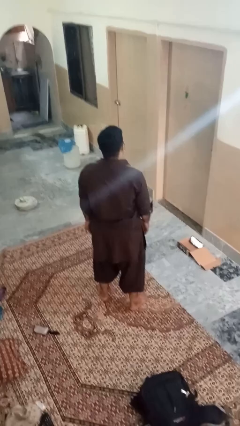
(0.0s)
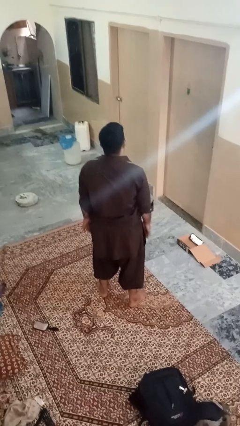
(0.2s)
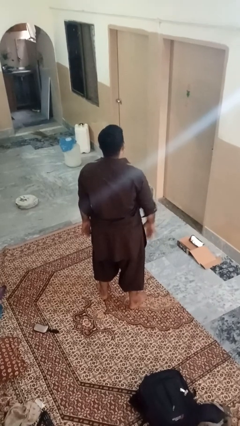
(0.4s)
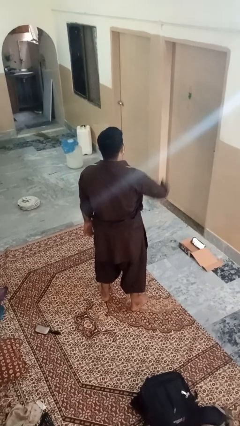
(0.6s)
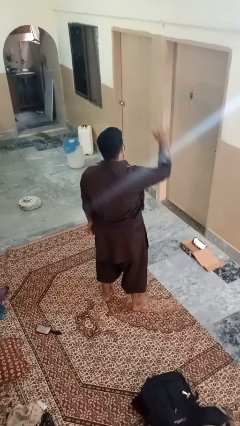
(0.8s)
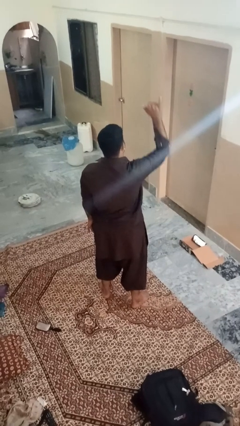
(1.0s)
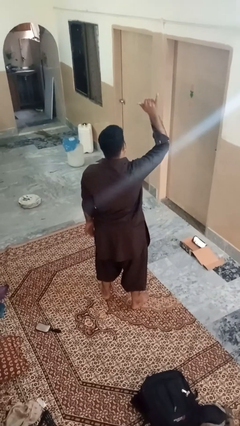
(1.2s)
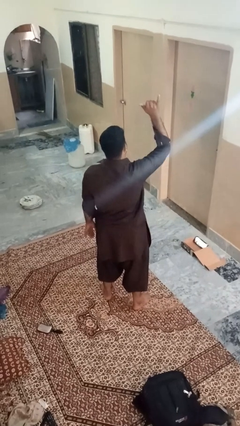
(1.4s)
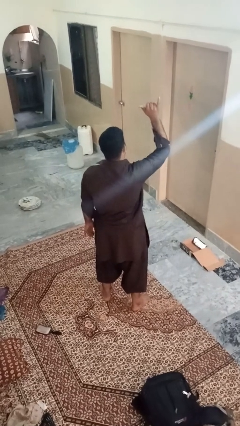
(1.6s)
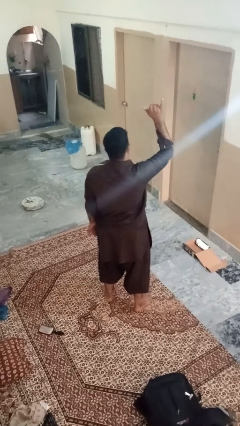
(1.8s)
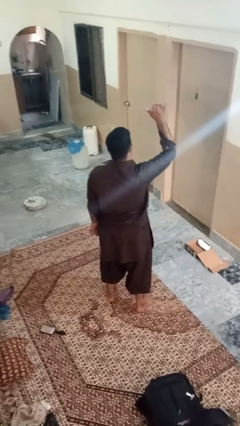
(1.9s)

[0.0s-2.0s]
person gestures hang loose

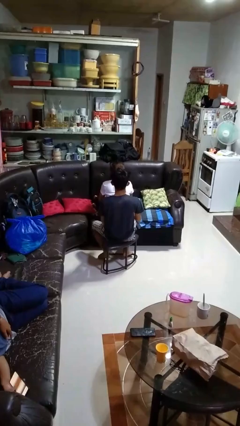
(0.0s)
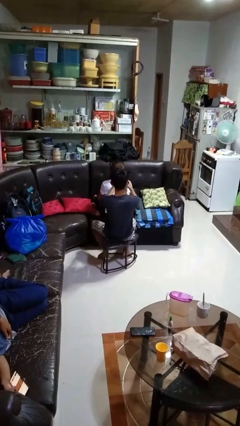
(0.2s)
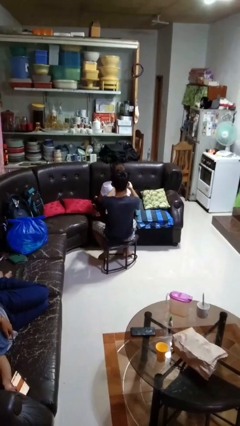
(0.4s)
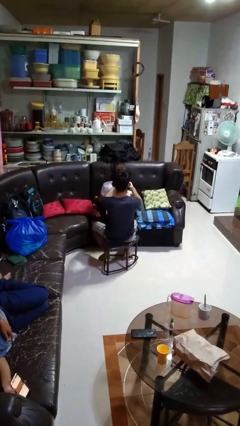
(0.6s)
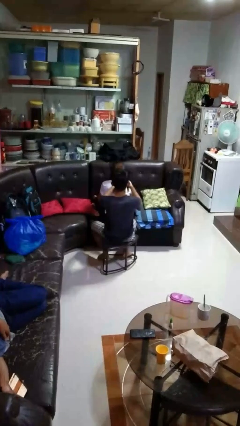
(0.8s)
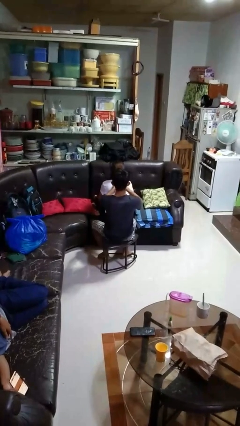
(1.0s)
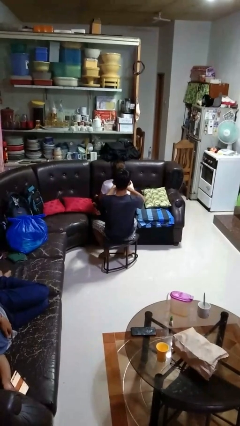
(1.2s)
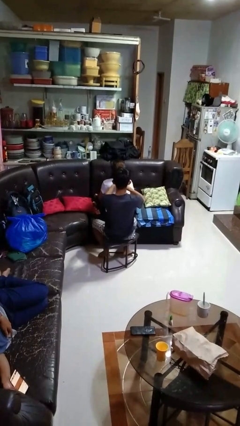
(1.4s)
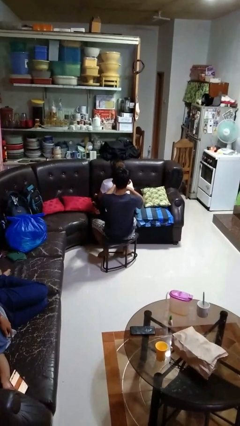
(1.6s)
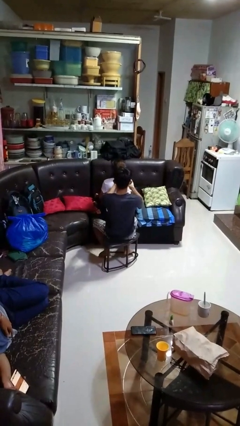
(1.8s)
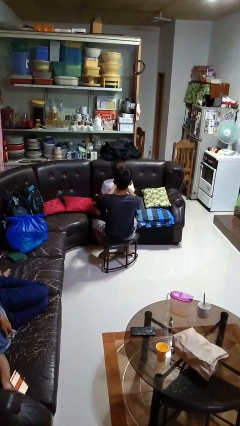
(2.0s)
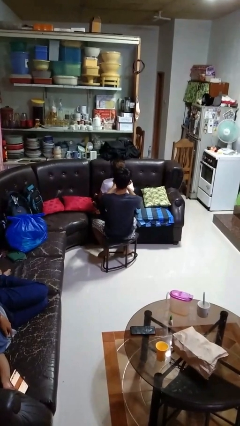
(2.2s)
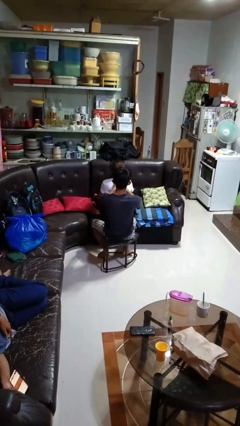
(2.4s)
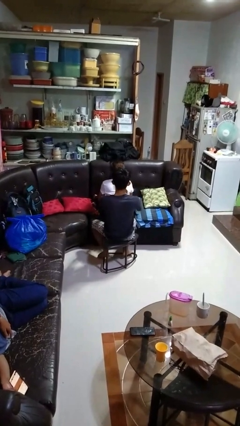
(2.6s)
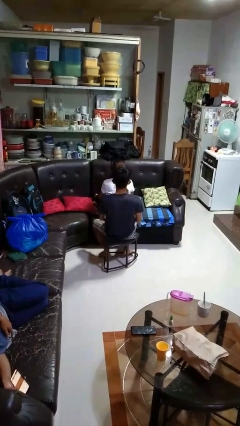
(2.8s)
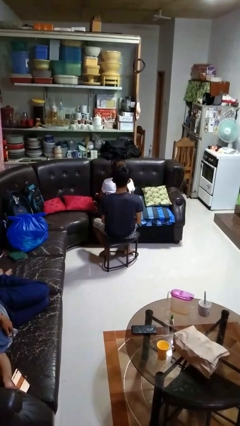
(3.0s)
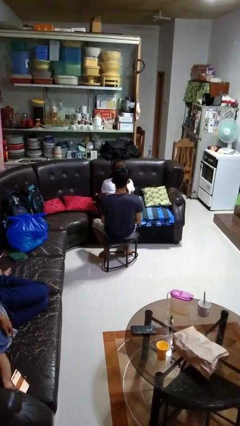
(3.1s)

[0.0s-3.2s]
person braids hair of person

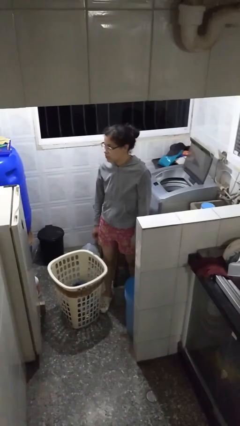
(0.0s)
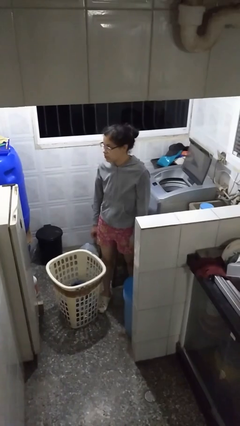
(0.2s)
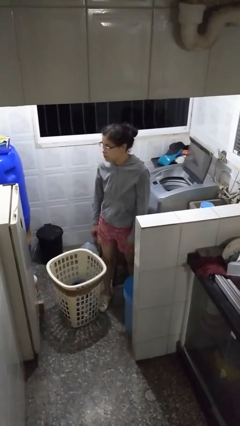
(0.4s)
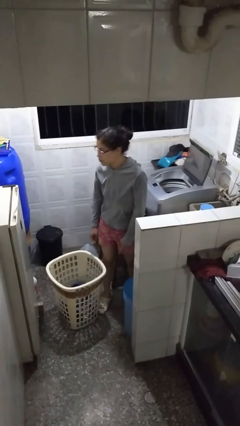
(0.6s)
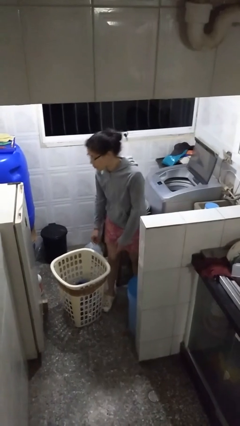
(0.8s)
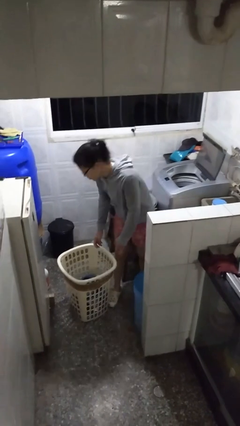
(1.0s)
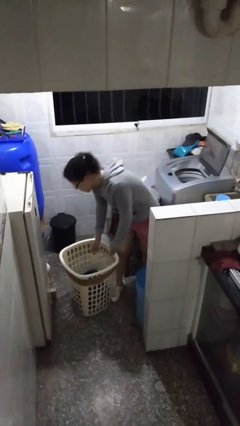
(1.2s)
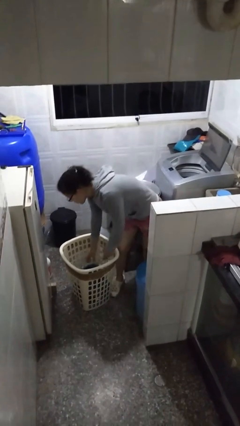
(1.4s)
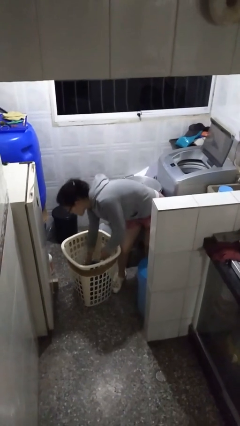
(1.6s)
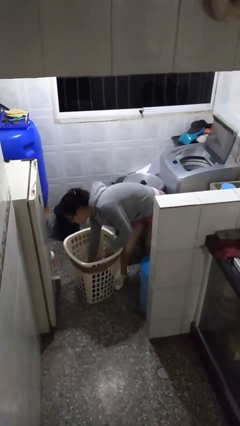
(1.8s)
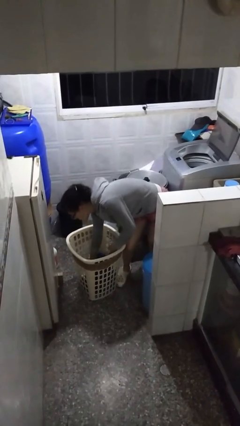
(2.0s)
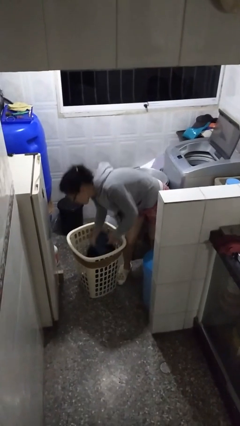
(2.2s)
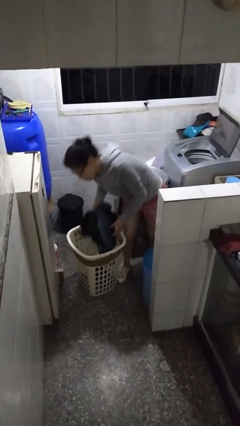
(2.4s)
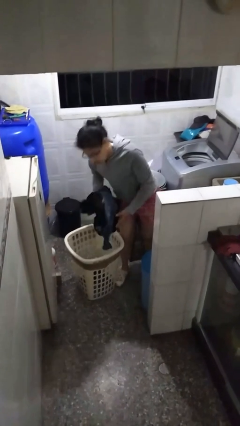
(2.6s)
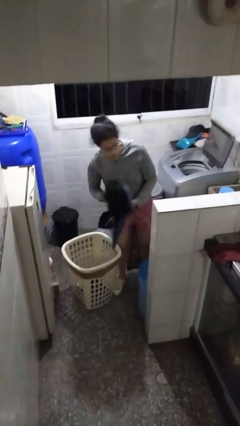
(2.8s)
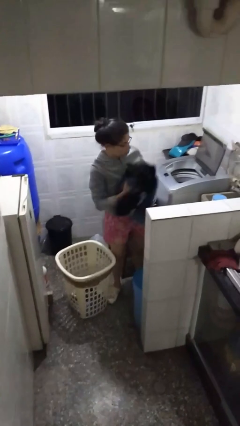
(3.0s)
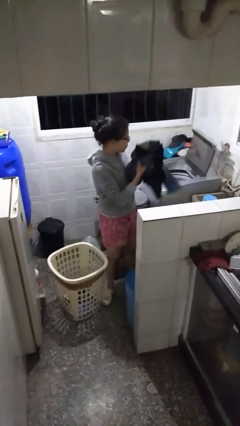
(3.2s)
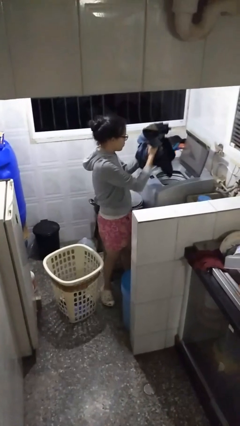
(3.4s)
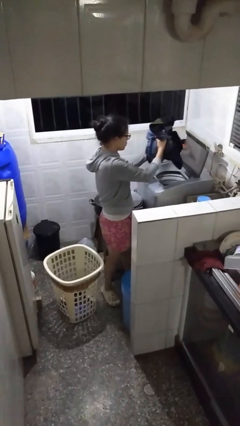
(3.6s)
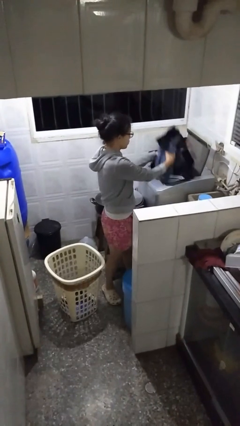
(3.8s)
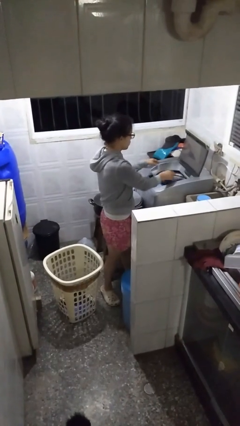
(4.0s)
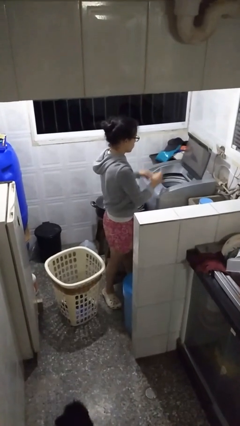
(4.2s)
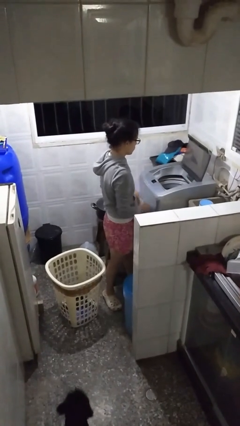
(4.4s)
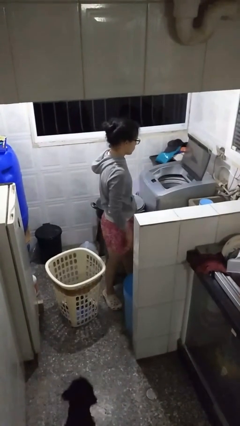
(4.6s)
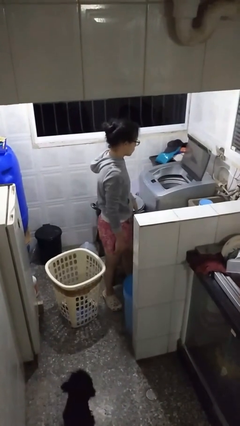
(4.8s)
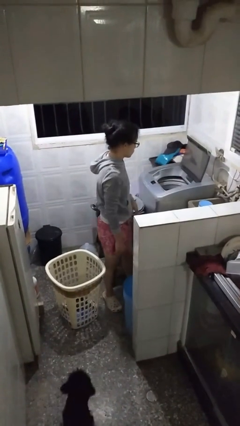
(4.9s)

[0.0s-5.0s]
person loads clotheswasher

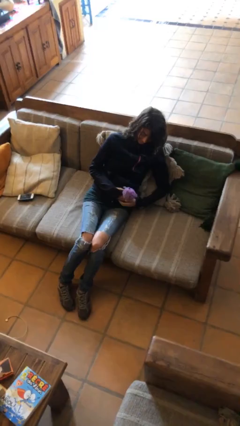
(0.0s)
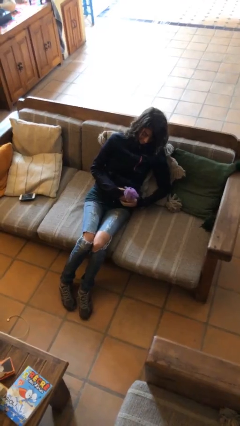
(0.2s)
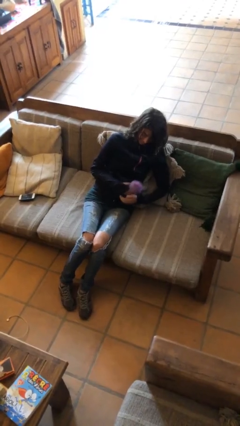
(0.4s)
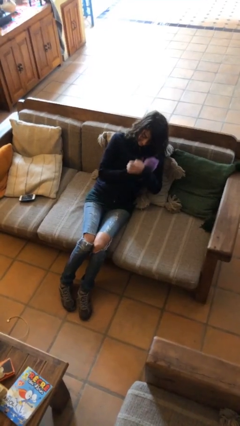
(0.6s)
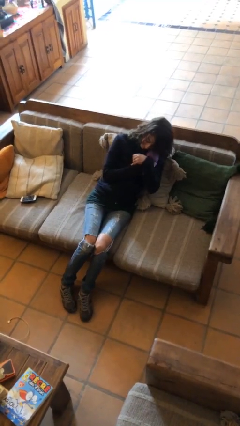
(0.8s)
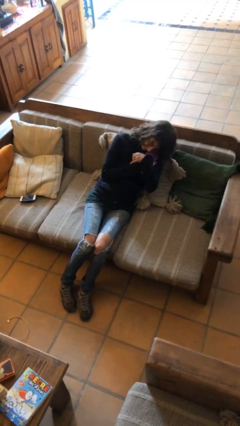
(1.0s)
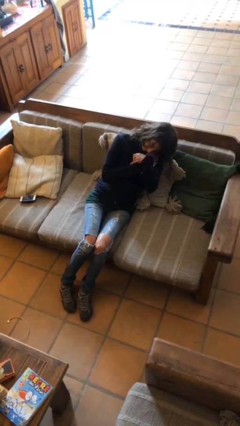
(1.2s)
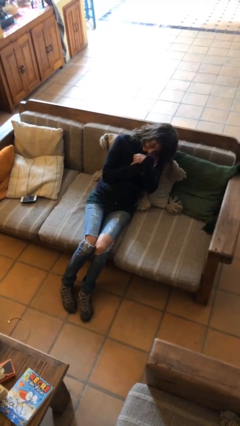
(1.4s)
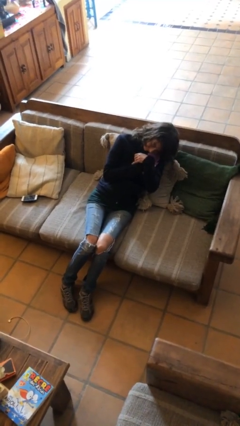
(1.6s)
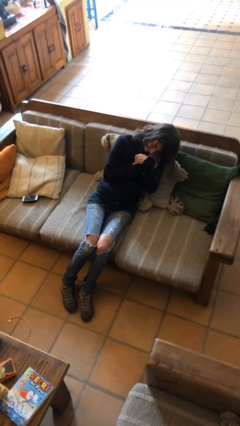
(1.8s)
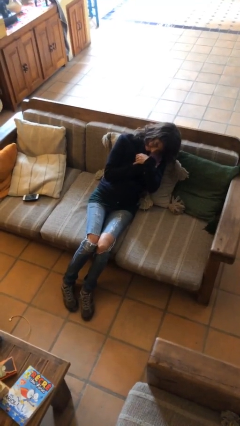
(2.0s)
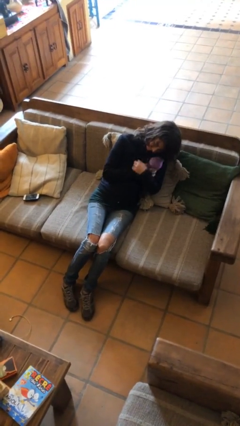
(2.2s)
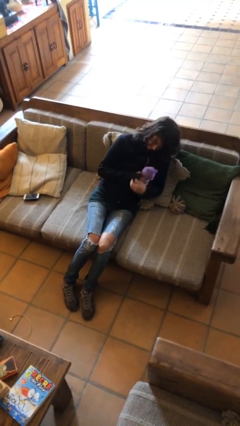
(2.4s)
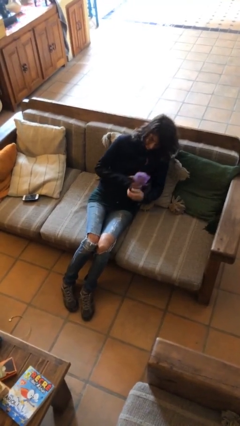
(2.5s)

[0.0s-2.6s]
person hugs stuffed animal

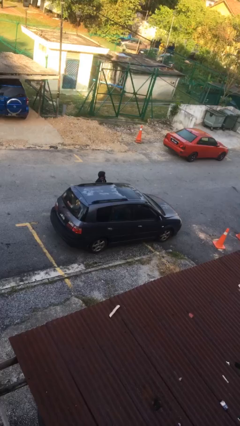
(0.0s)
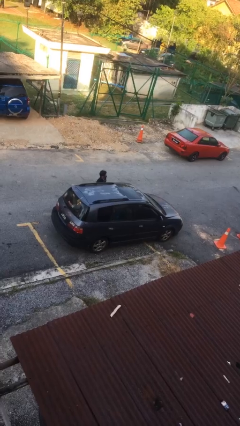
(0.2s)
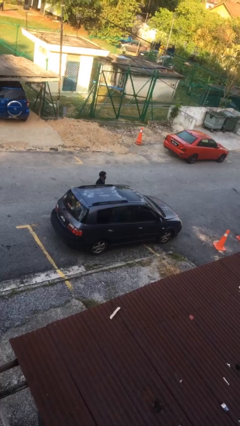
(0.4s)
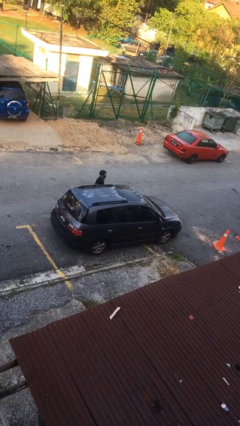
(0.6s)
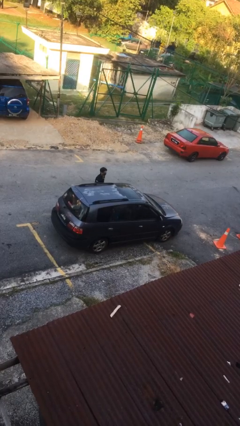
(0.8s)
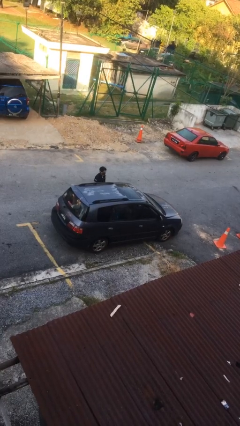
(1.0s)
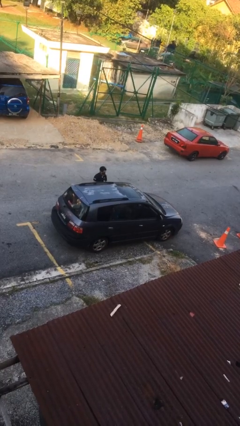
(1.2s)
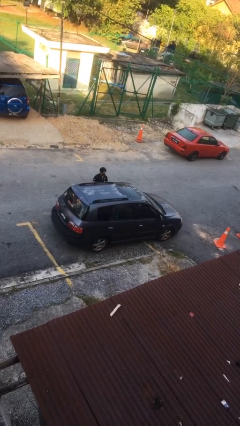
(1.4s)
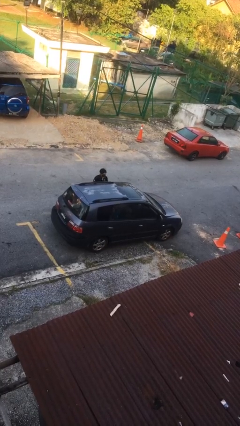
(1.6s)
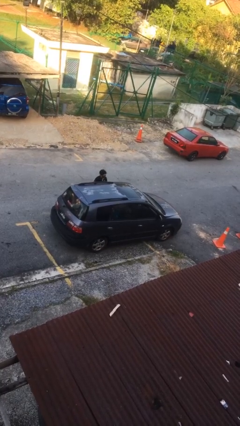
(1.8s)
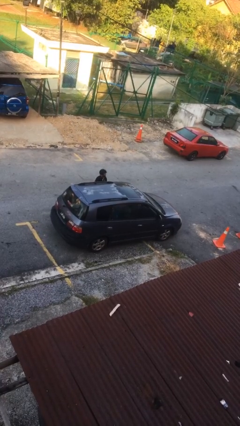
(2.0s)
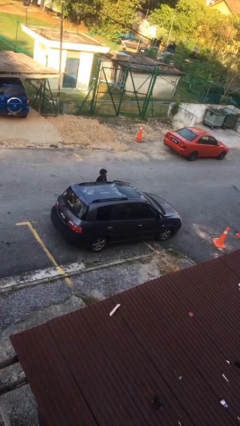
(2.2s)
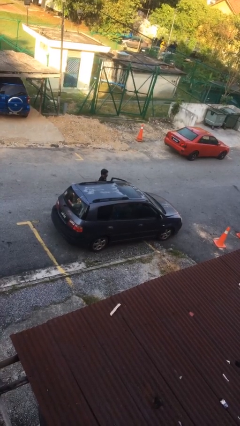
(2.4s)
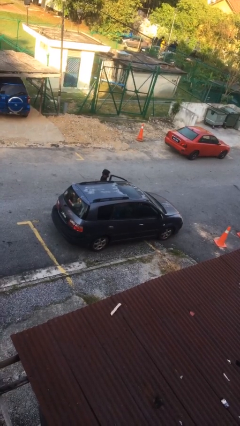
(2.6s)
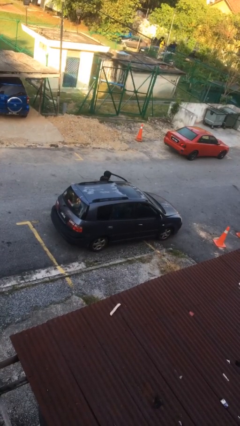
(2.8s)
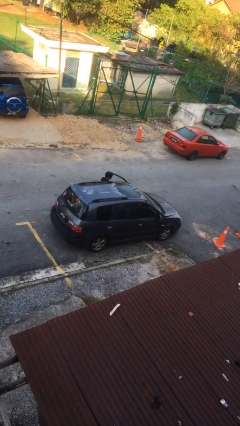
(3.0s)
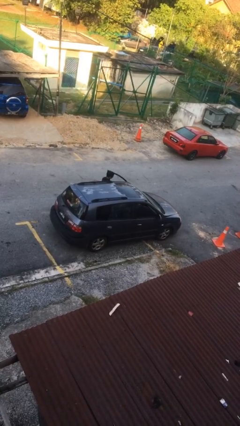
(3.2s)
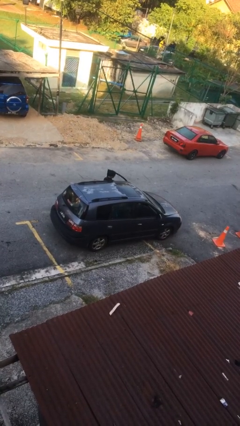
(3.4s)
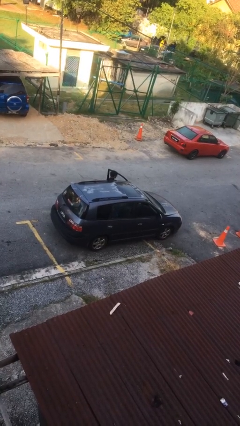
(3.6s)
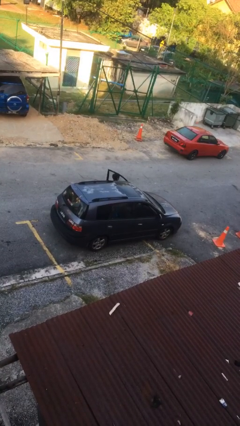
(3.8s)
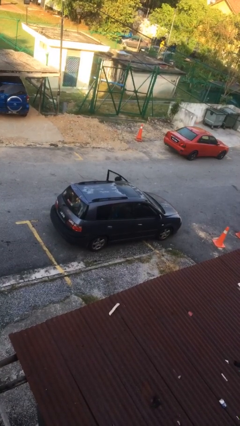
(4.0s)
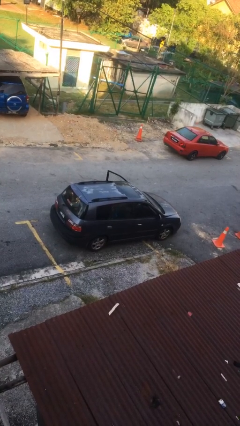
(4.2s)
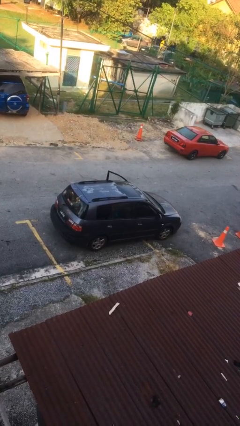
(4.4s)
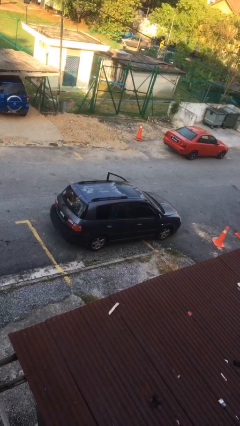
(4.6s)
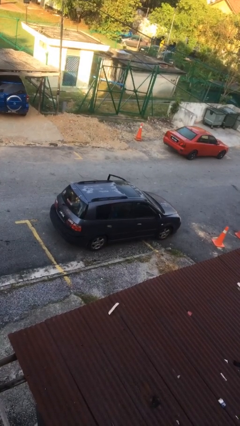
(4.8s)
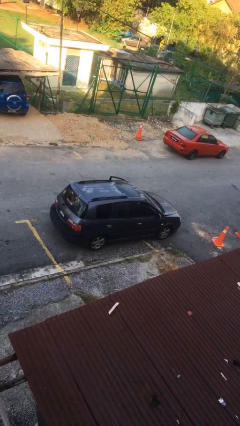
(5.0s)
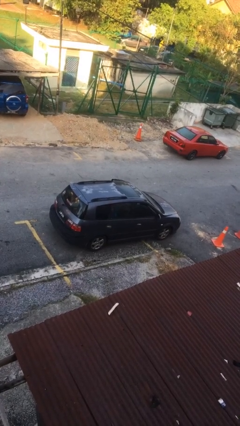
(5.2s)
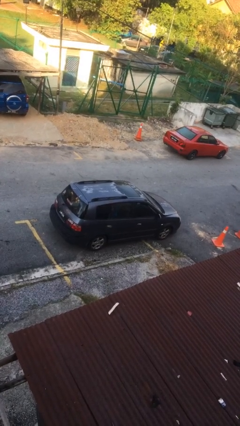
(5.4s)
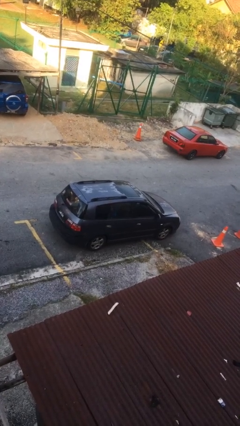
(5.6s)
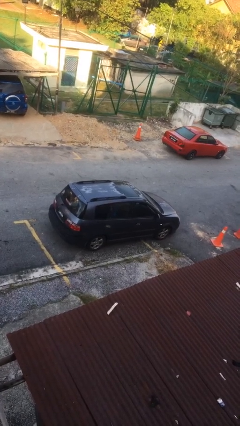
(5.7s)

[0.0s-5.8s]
car picks up person
